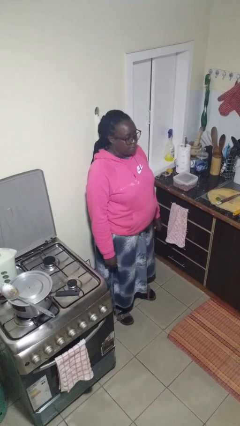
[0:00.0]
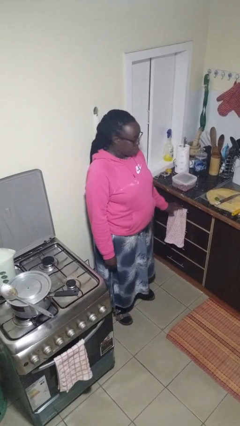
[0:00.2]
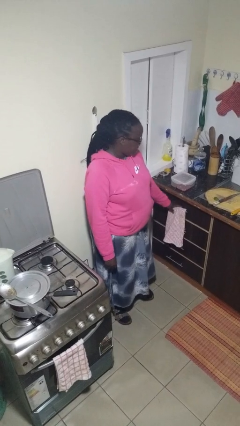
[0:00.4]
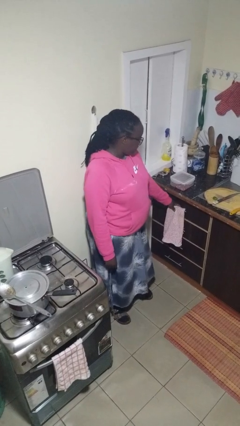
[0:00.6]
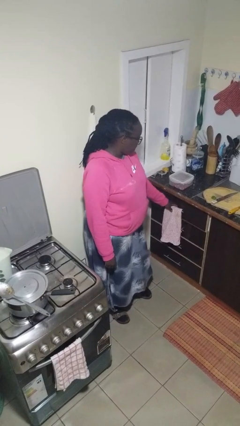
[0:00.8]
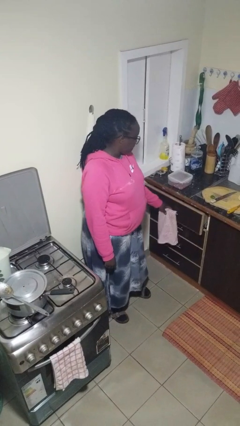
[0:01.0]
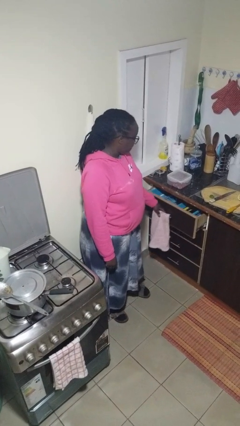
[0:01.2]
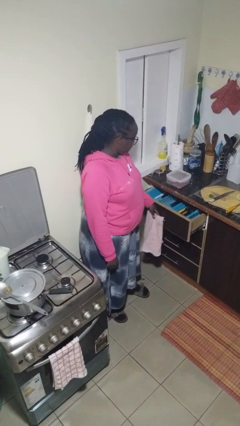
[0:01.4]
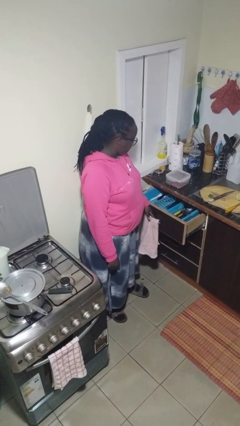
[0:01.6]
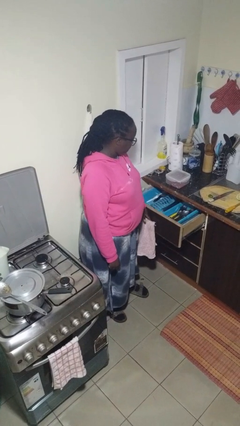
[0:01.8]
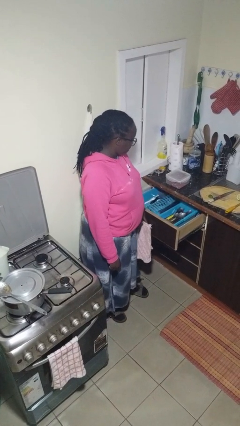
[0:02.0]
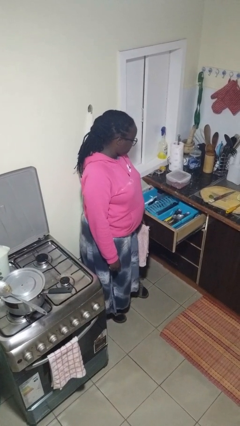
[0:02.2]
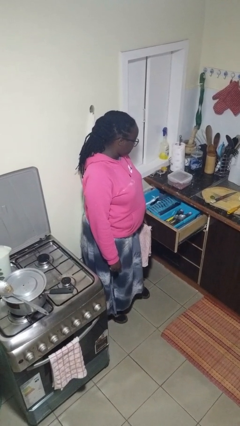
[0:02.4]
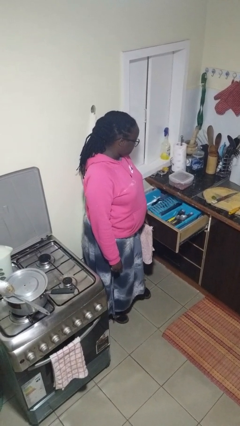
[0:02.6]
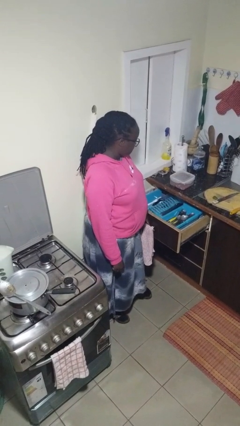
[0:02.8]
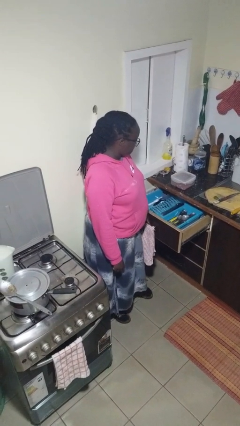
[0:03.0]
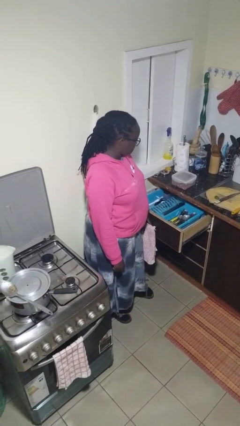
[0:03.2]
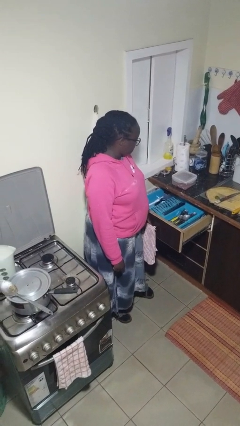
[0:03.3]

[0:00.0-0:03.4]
person opens kitchen drawer

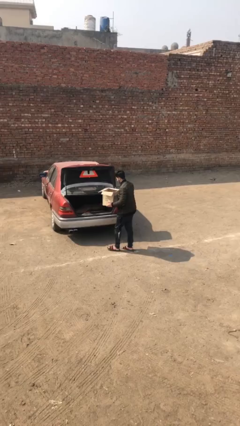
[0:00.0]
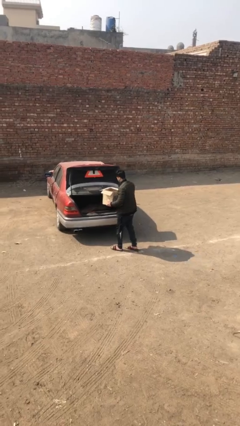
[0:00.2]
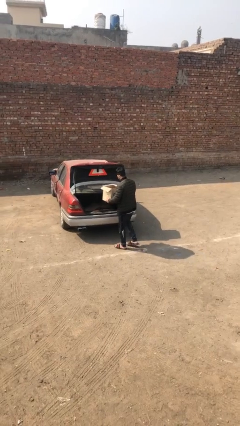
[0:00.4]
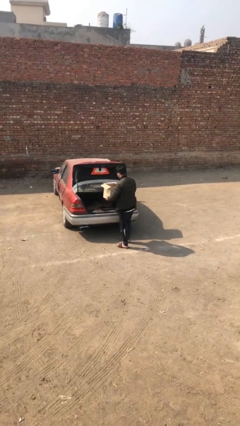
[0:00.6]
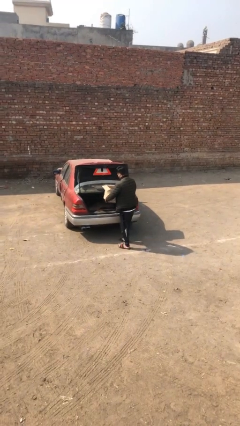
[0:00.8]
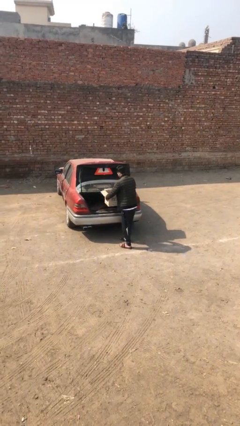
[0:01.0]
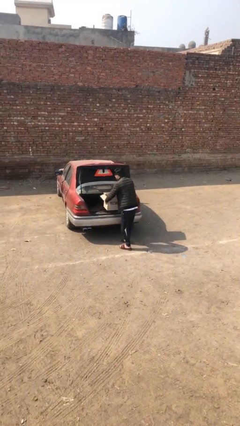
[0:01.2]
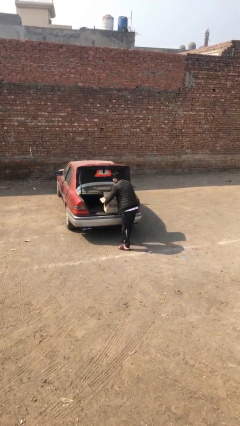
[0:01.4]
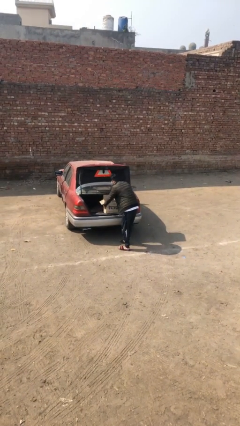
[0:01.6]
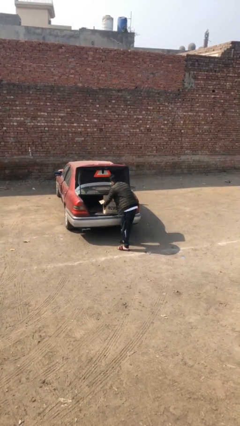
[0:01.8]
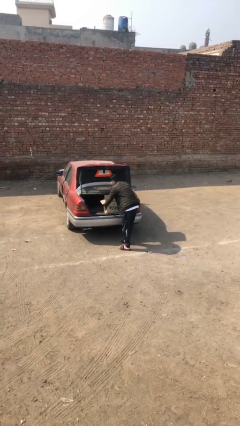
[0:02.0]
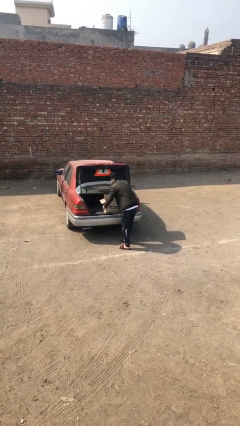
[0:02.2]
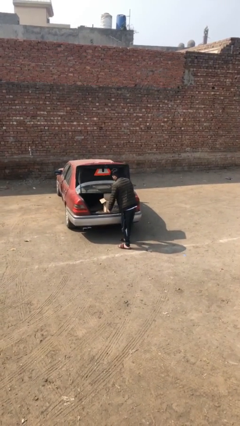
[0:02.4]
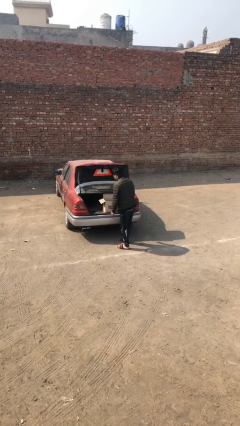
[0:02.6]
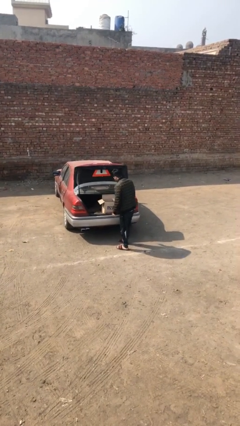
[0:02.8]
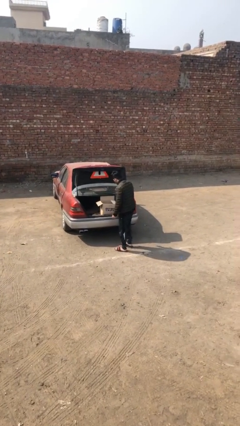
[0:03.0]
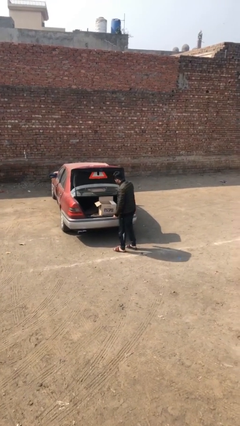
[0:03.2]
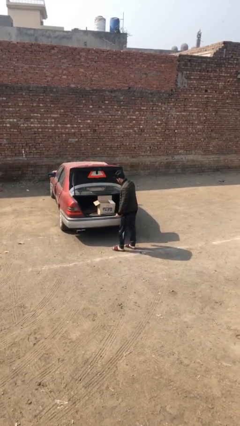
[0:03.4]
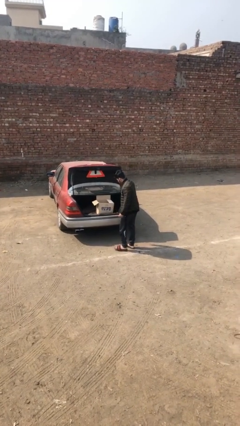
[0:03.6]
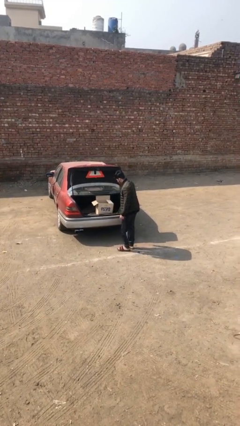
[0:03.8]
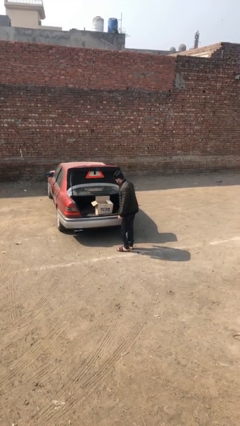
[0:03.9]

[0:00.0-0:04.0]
person loads car

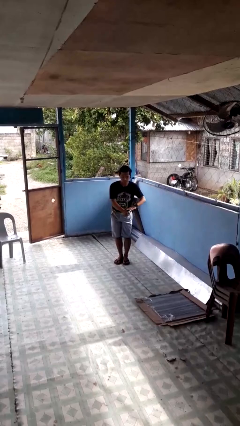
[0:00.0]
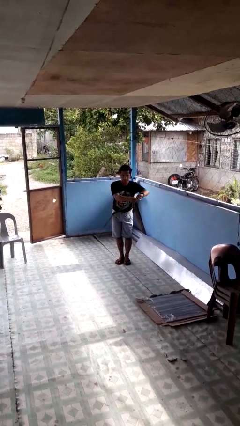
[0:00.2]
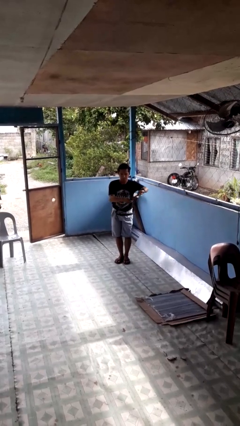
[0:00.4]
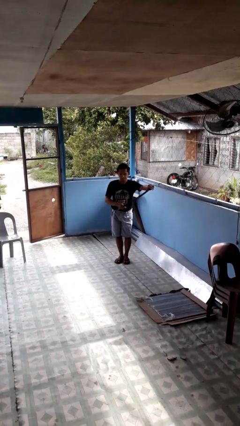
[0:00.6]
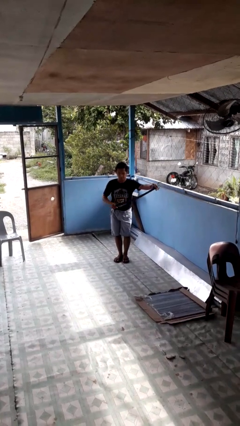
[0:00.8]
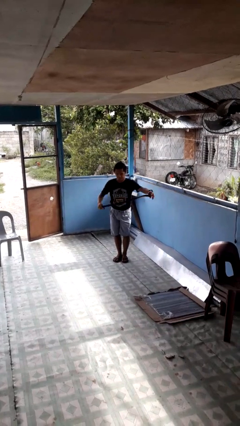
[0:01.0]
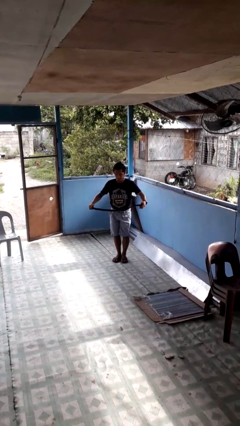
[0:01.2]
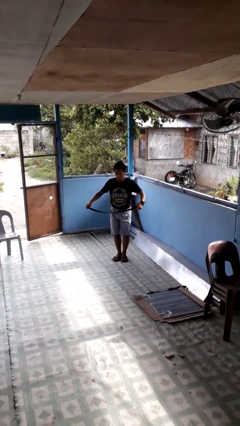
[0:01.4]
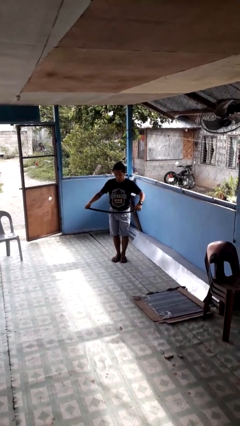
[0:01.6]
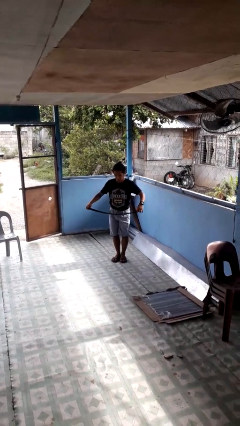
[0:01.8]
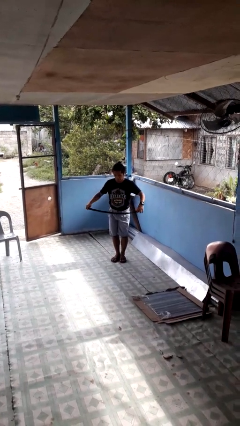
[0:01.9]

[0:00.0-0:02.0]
person takes off belt

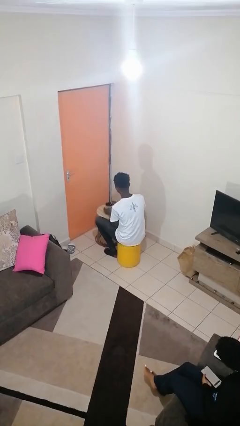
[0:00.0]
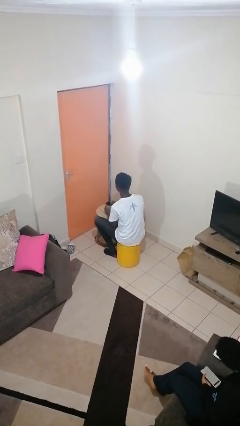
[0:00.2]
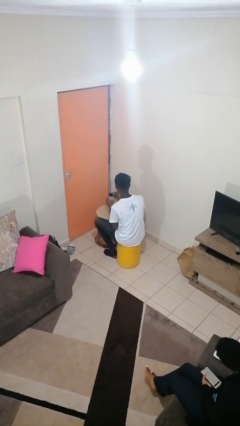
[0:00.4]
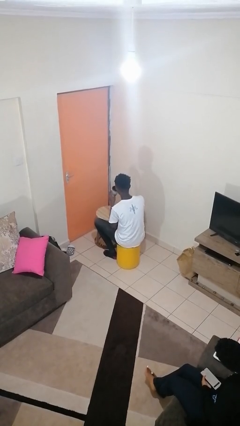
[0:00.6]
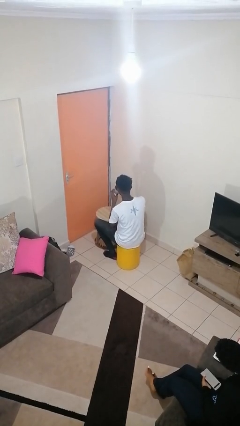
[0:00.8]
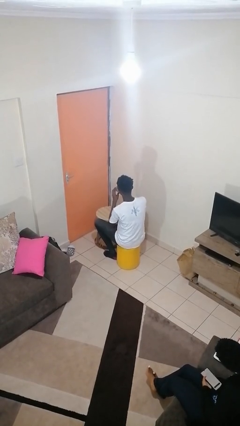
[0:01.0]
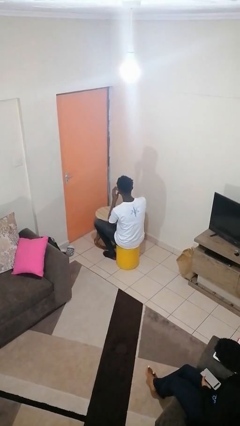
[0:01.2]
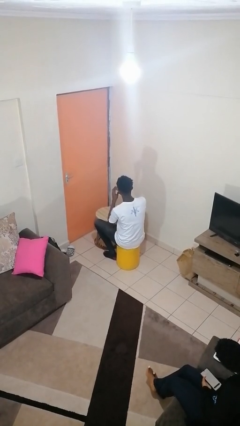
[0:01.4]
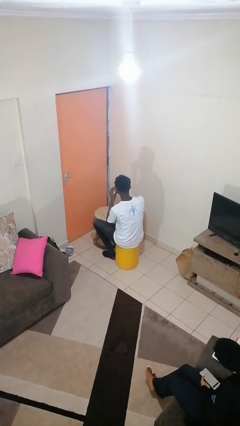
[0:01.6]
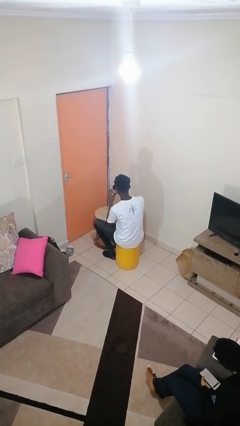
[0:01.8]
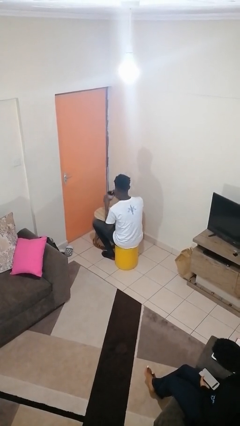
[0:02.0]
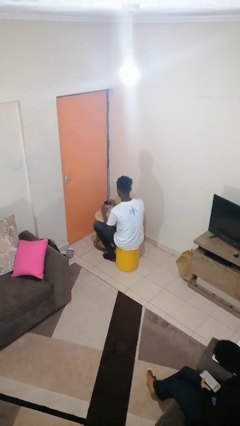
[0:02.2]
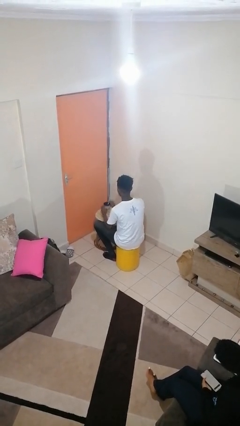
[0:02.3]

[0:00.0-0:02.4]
person drinks from mug

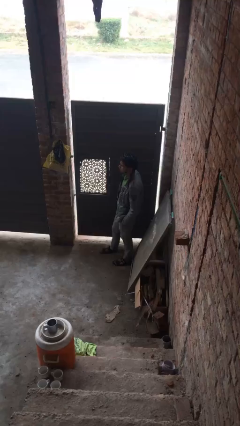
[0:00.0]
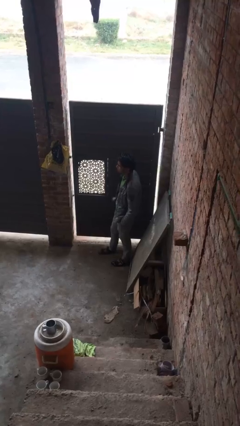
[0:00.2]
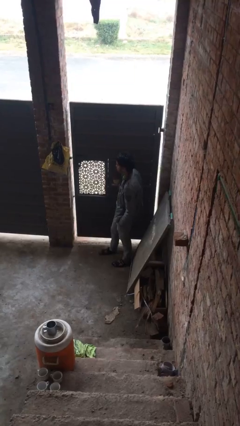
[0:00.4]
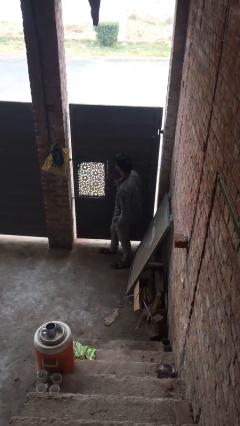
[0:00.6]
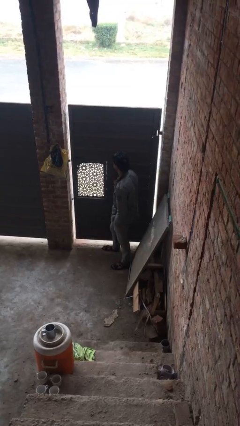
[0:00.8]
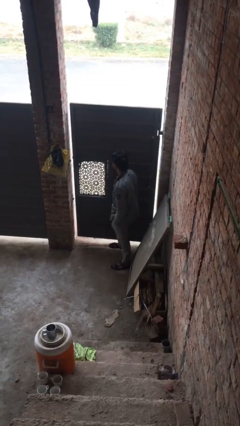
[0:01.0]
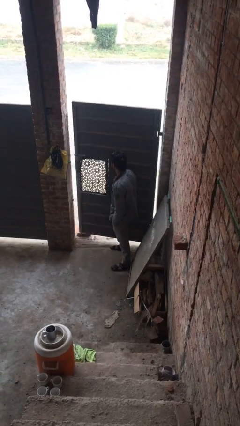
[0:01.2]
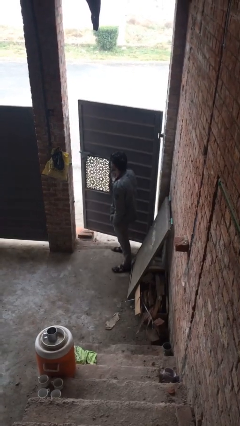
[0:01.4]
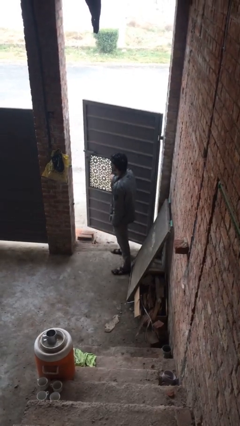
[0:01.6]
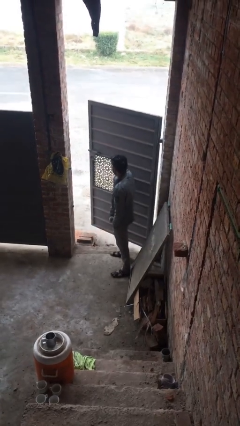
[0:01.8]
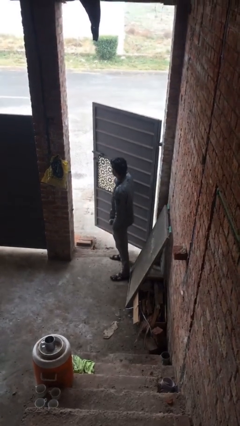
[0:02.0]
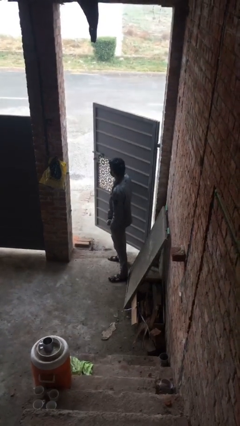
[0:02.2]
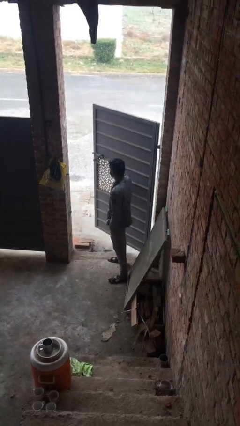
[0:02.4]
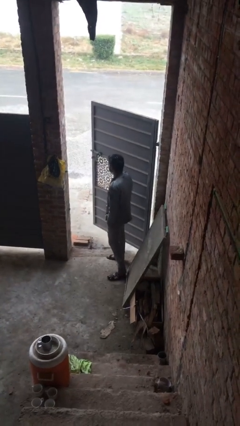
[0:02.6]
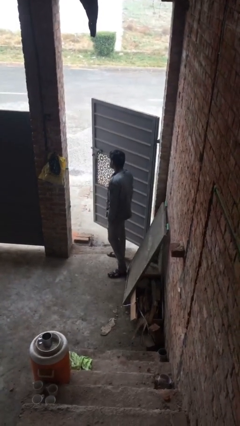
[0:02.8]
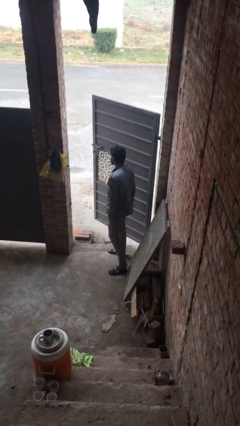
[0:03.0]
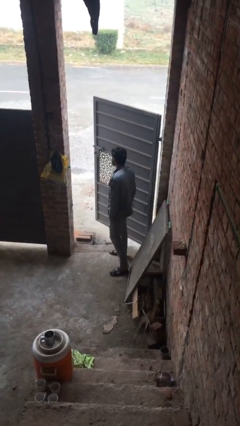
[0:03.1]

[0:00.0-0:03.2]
person opens facility door

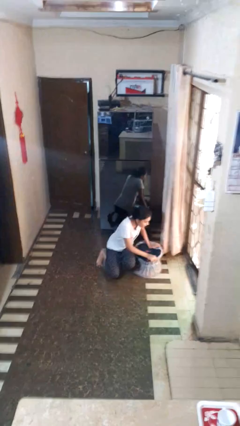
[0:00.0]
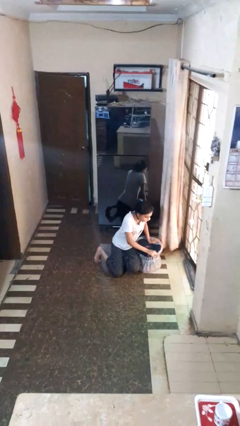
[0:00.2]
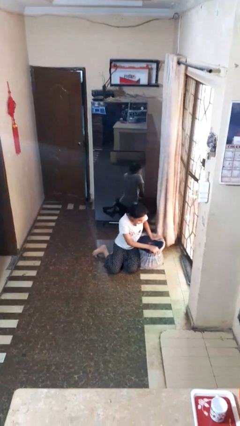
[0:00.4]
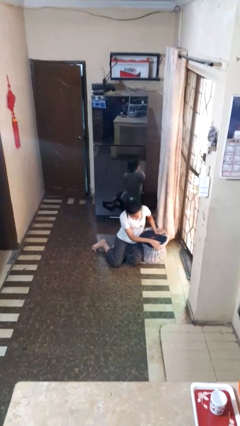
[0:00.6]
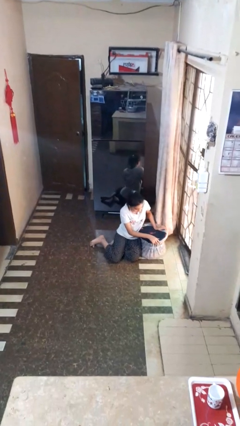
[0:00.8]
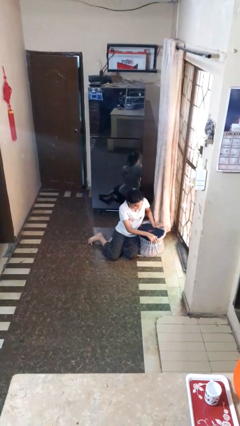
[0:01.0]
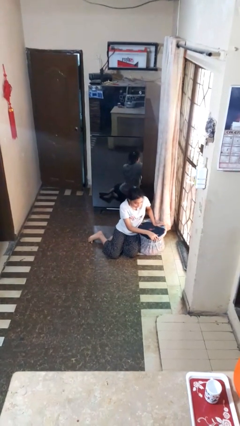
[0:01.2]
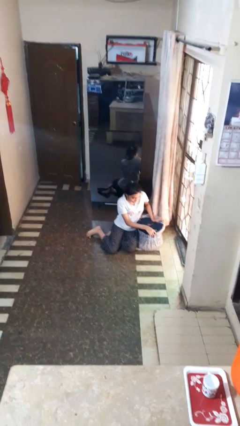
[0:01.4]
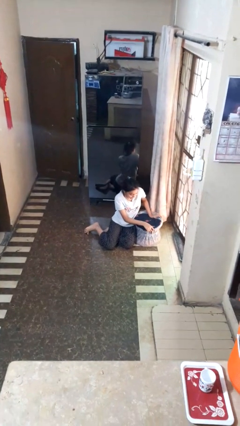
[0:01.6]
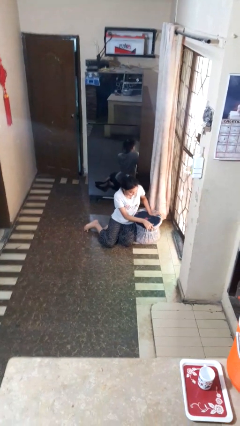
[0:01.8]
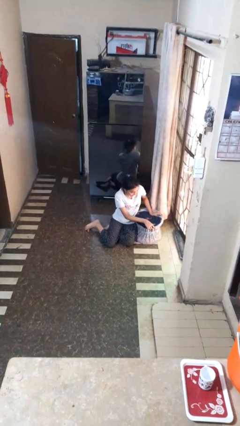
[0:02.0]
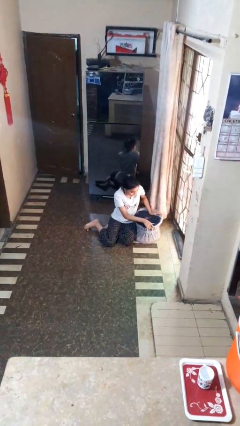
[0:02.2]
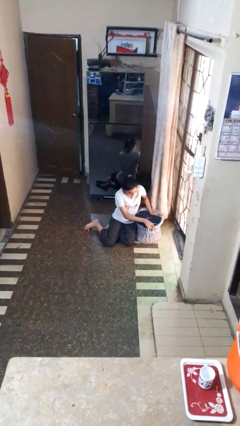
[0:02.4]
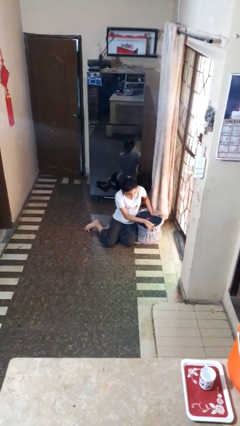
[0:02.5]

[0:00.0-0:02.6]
person lies down on floor

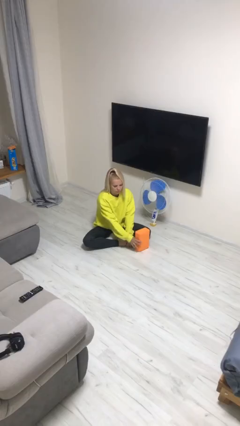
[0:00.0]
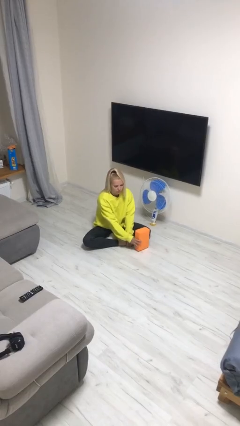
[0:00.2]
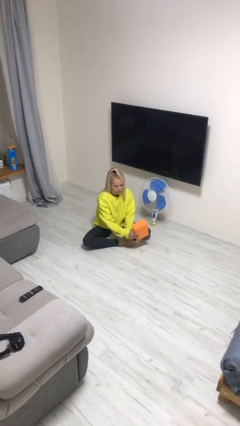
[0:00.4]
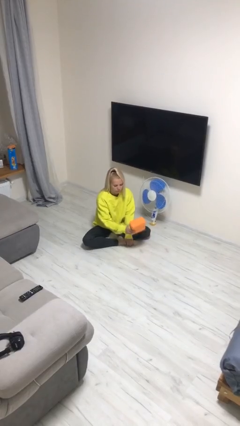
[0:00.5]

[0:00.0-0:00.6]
person picks up object from floor
